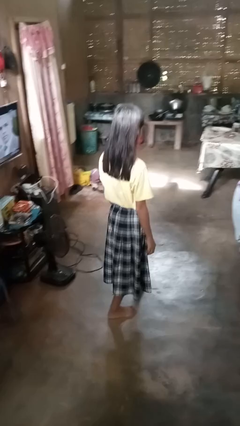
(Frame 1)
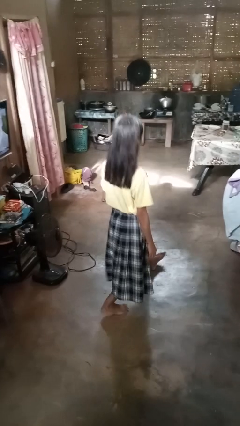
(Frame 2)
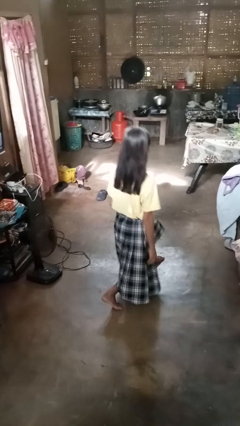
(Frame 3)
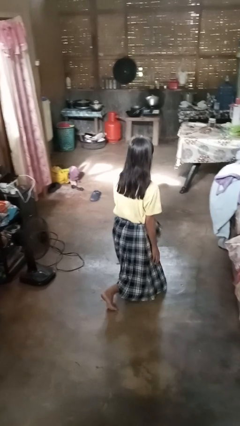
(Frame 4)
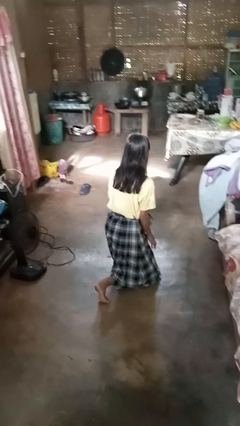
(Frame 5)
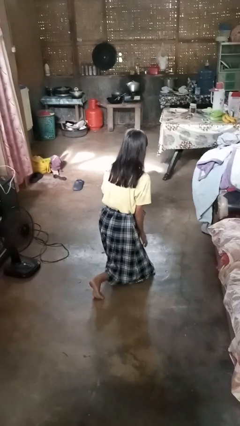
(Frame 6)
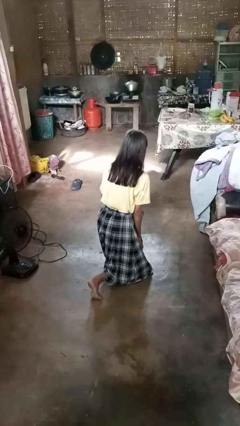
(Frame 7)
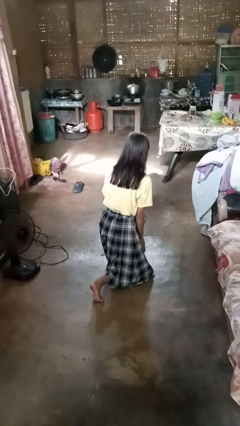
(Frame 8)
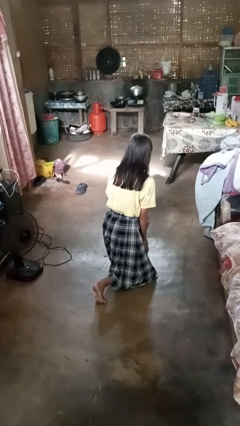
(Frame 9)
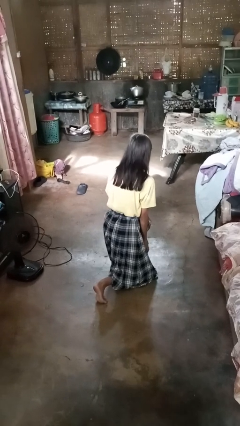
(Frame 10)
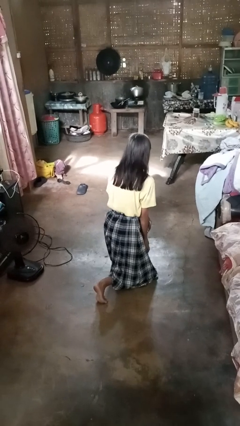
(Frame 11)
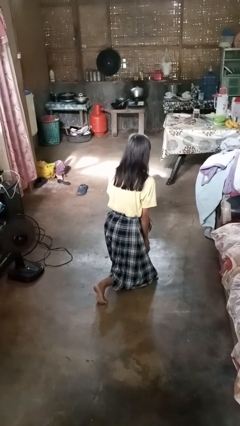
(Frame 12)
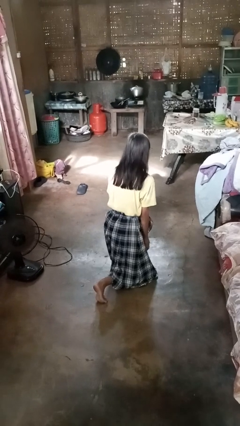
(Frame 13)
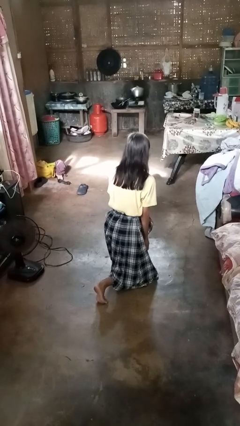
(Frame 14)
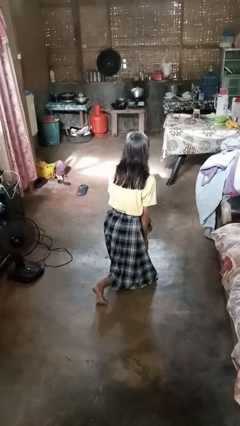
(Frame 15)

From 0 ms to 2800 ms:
person exercises with lunges

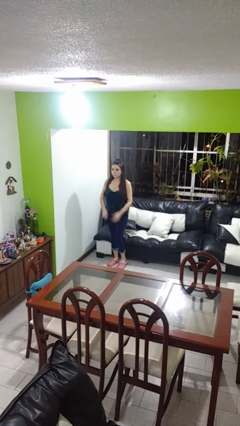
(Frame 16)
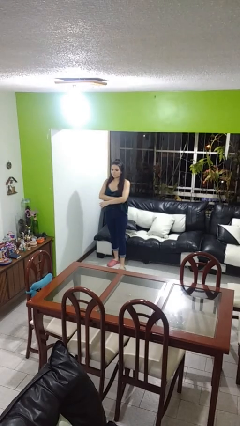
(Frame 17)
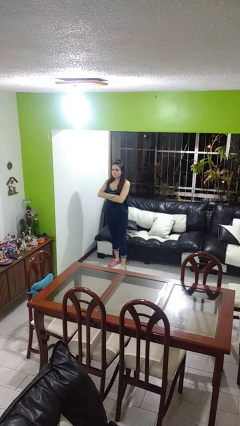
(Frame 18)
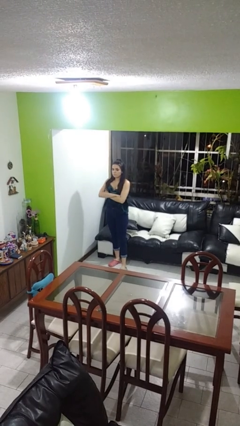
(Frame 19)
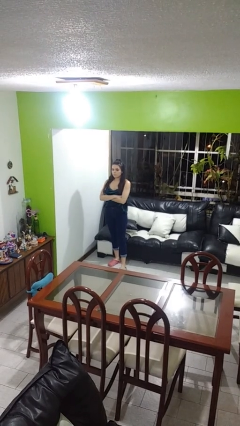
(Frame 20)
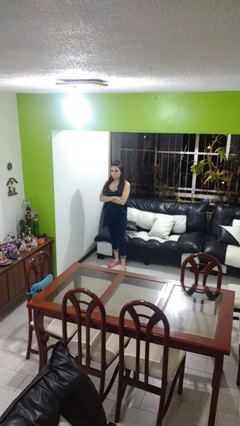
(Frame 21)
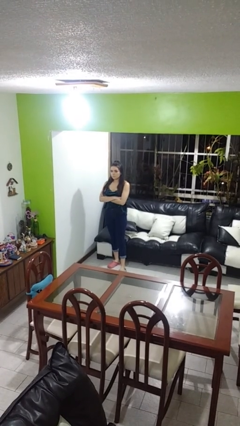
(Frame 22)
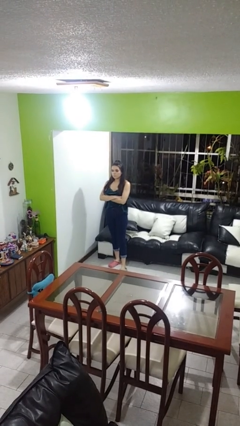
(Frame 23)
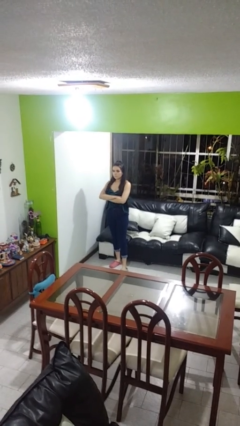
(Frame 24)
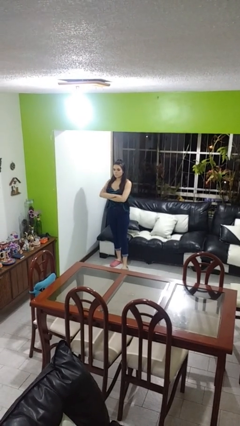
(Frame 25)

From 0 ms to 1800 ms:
person crosses arms

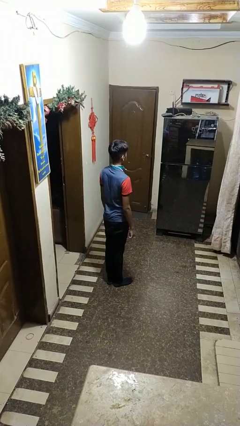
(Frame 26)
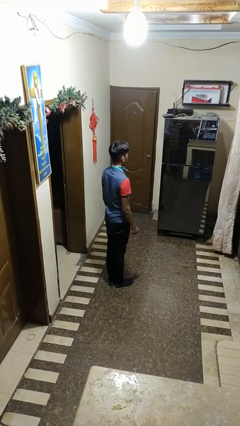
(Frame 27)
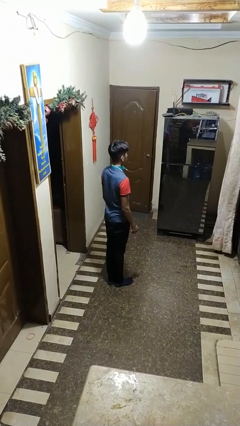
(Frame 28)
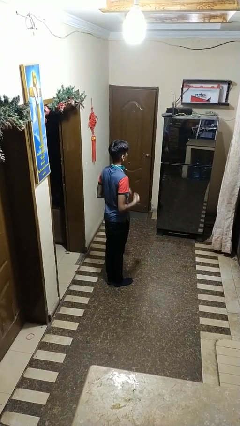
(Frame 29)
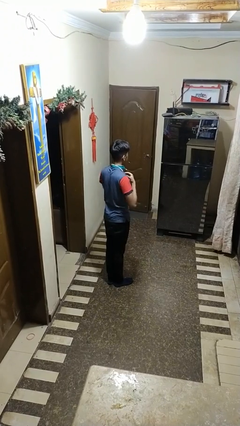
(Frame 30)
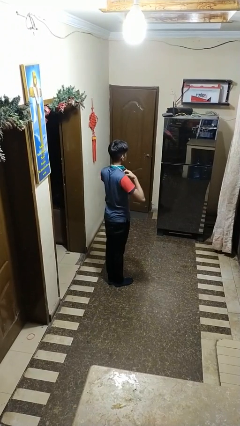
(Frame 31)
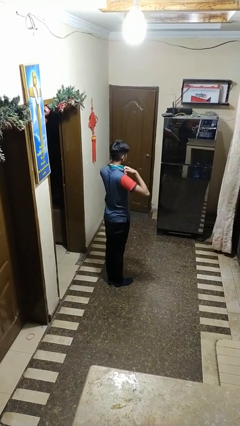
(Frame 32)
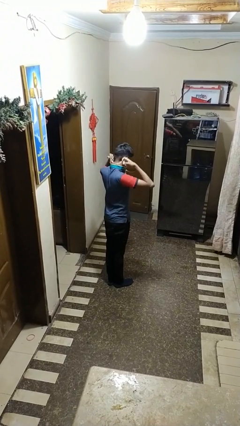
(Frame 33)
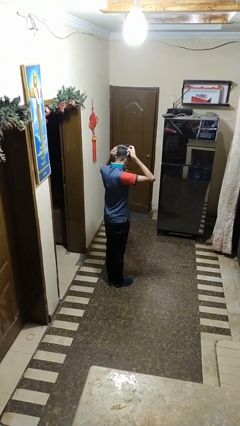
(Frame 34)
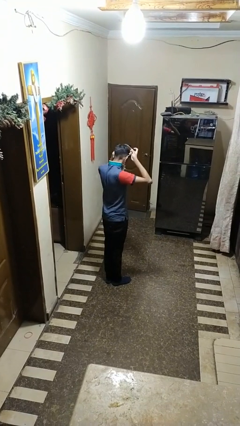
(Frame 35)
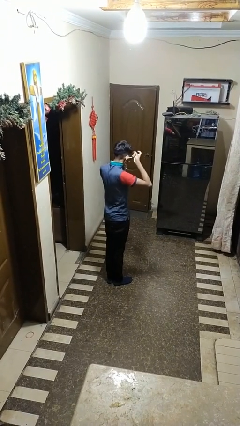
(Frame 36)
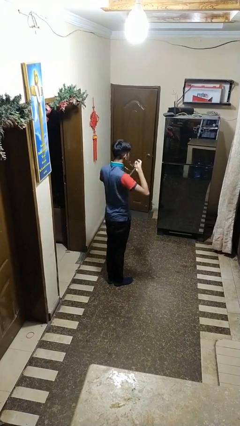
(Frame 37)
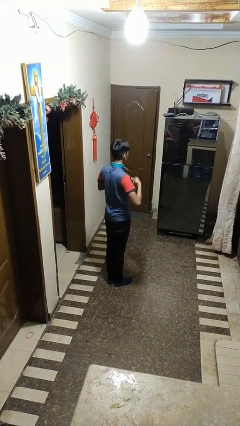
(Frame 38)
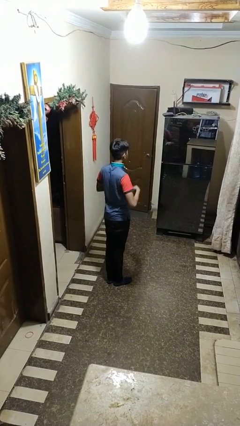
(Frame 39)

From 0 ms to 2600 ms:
person takes off necklace

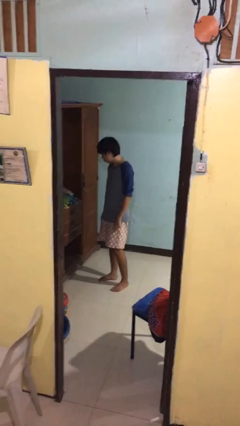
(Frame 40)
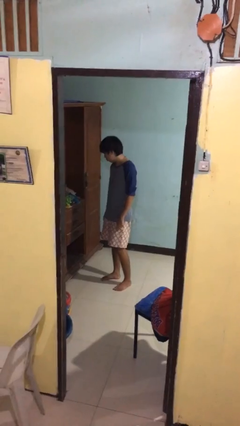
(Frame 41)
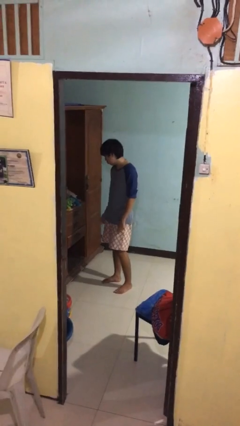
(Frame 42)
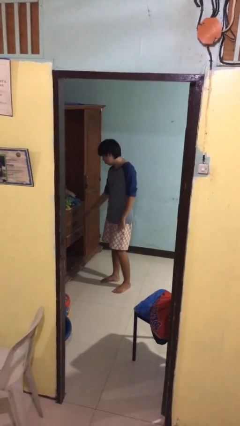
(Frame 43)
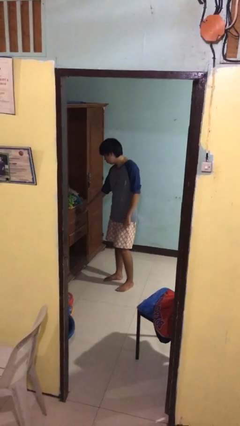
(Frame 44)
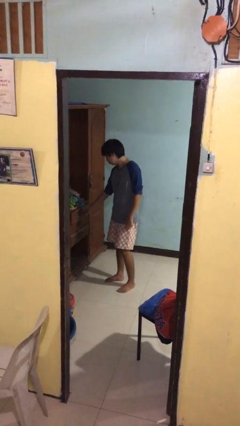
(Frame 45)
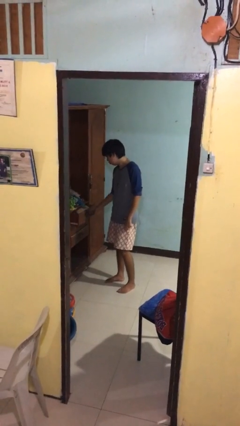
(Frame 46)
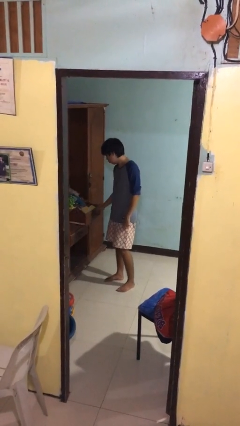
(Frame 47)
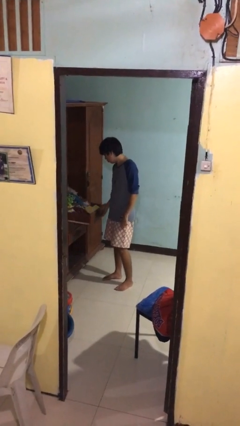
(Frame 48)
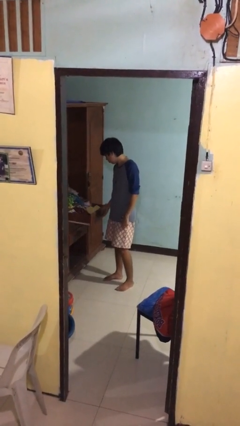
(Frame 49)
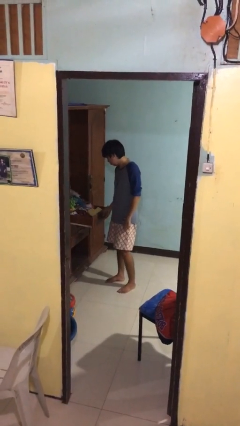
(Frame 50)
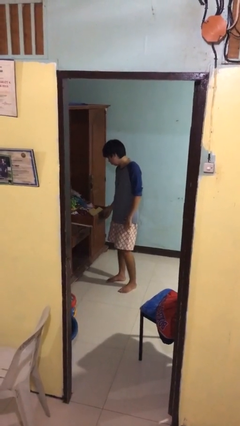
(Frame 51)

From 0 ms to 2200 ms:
person opens dresser drawer

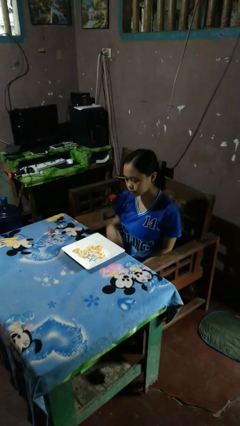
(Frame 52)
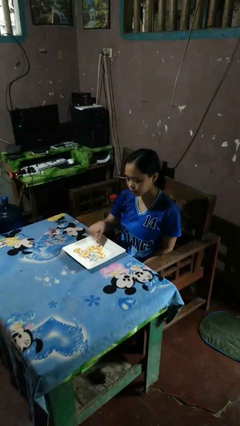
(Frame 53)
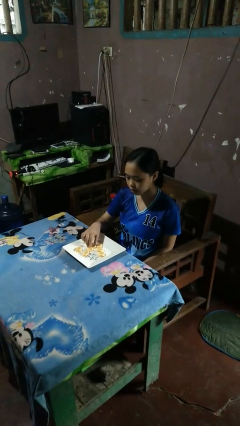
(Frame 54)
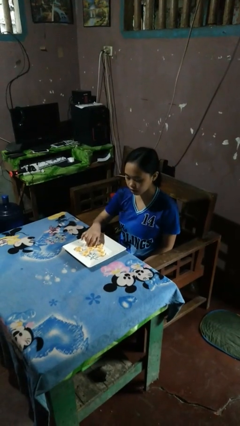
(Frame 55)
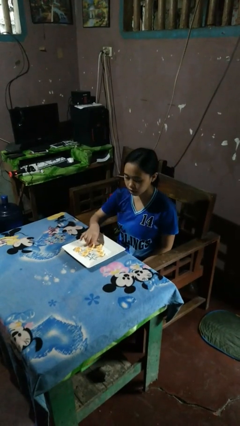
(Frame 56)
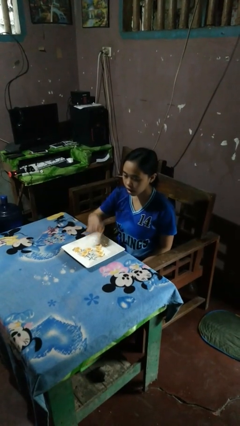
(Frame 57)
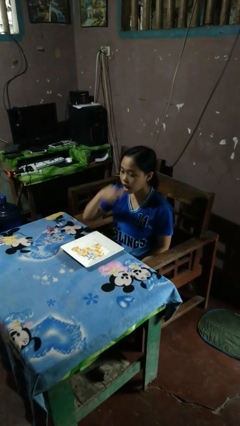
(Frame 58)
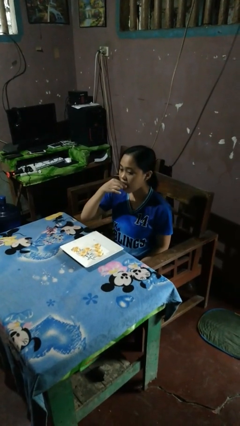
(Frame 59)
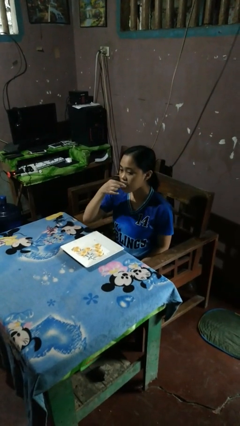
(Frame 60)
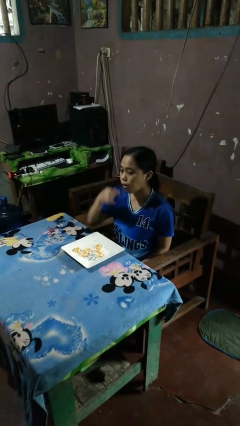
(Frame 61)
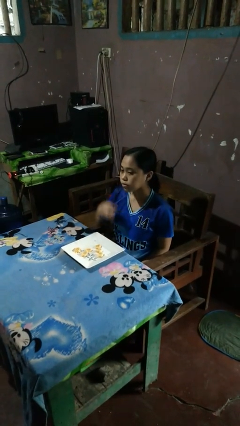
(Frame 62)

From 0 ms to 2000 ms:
person eats with hands

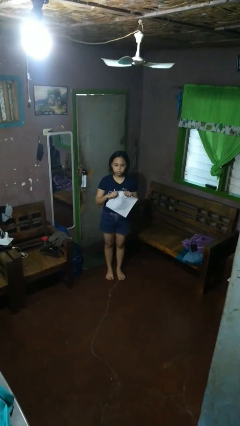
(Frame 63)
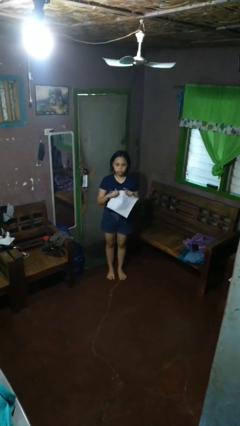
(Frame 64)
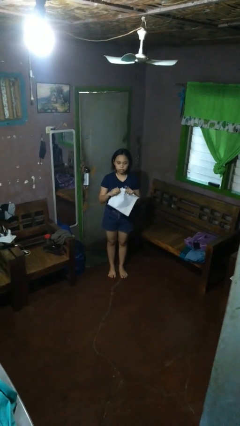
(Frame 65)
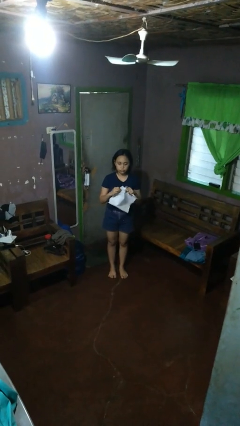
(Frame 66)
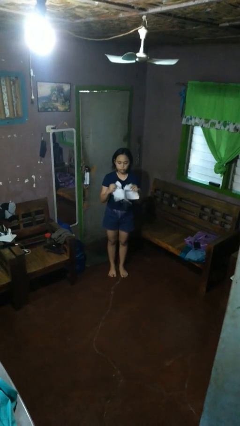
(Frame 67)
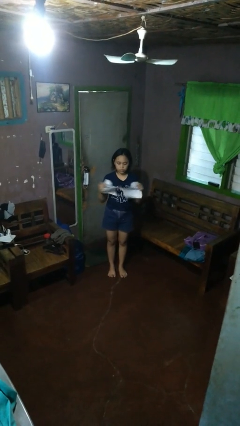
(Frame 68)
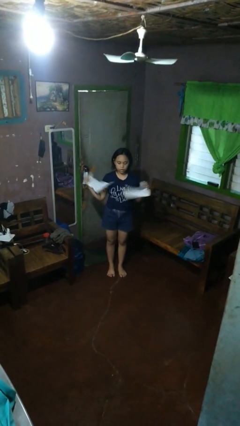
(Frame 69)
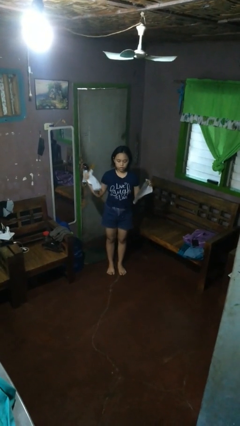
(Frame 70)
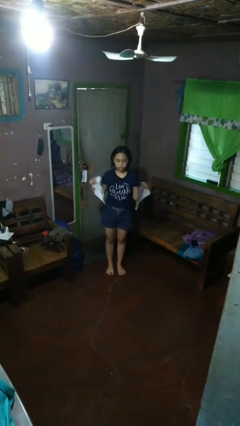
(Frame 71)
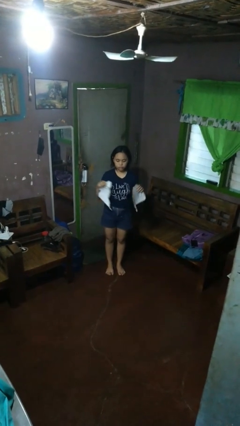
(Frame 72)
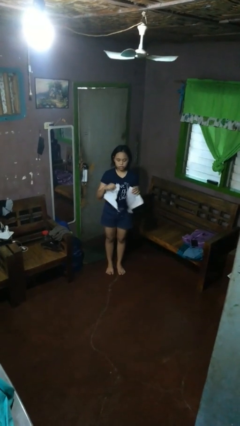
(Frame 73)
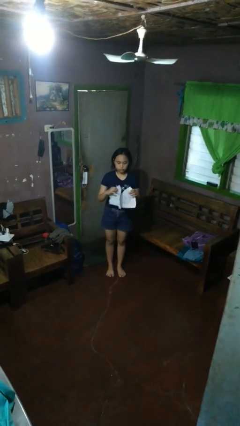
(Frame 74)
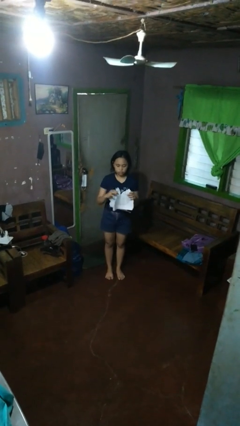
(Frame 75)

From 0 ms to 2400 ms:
person tears paper

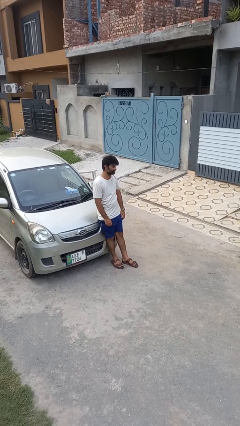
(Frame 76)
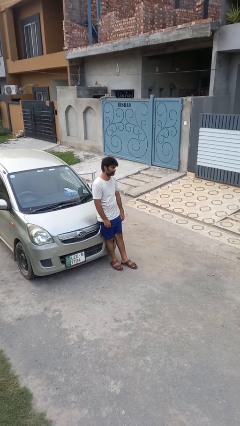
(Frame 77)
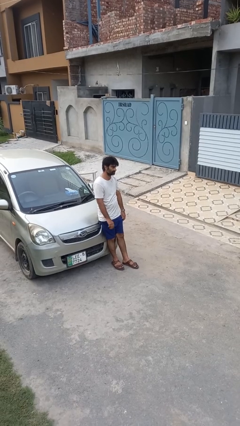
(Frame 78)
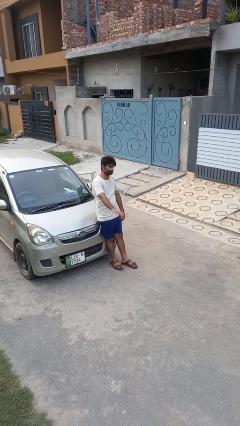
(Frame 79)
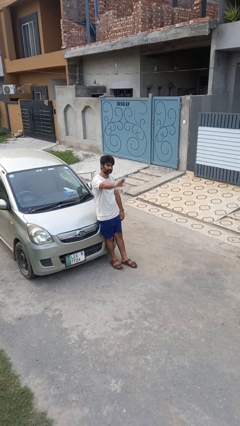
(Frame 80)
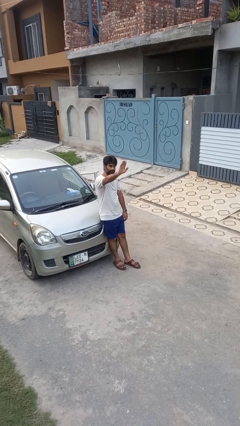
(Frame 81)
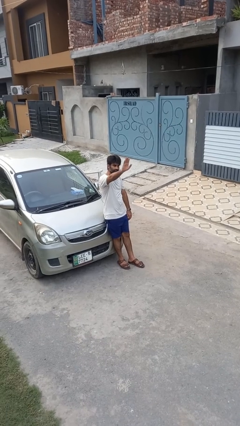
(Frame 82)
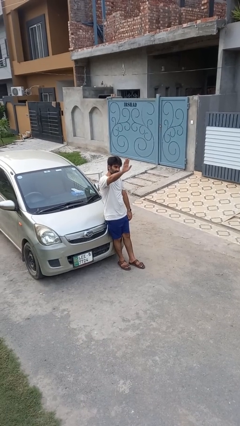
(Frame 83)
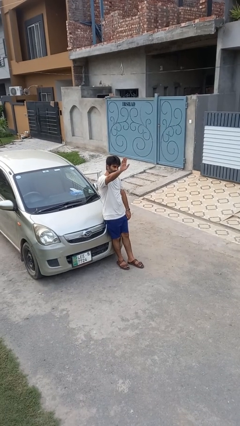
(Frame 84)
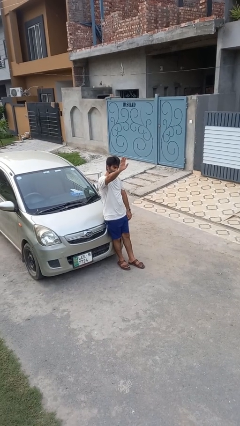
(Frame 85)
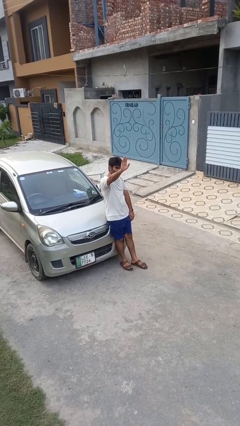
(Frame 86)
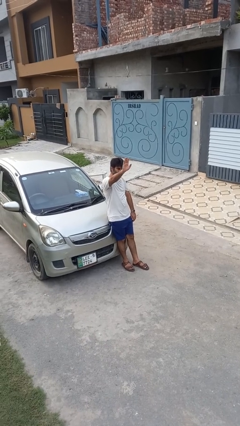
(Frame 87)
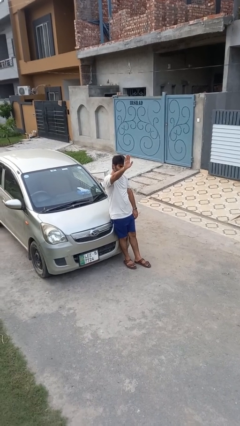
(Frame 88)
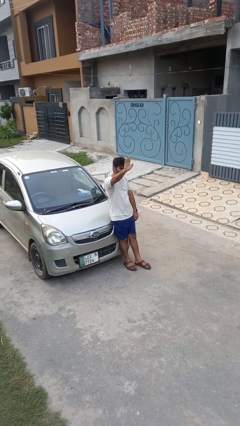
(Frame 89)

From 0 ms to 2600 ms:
person gestures raise hand
